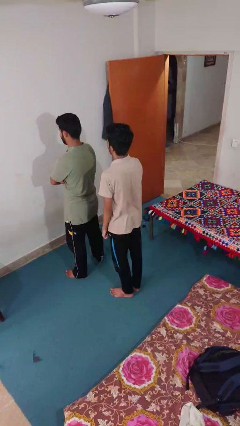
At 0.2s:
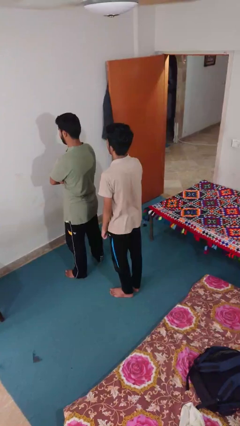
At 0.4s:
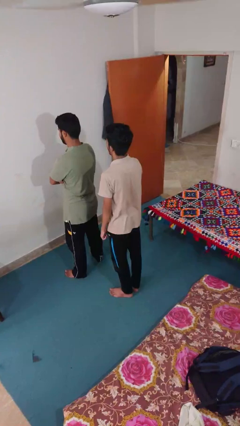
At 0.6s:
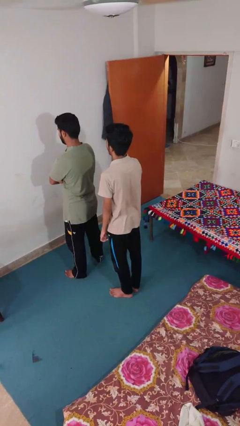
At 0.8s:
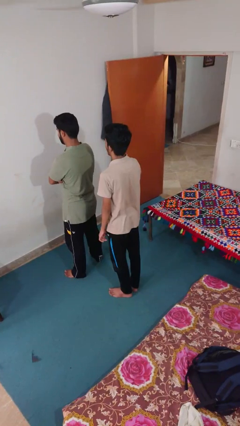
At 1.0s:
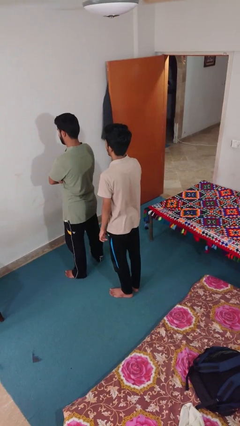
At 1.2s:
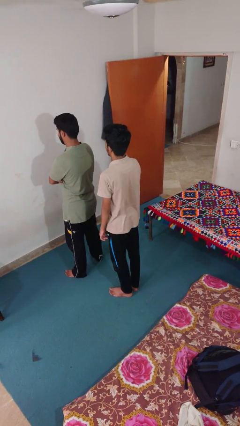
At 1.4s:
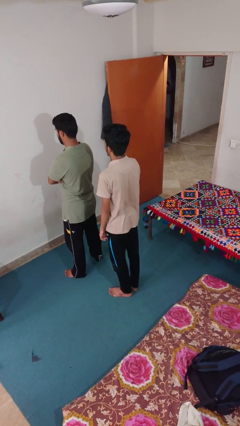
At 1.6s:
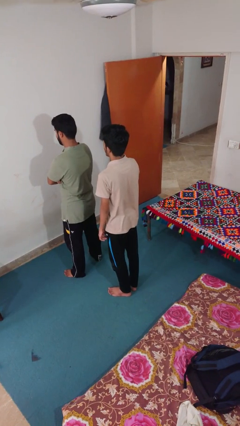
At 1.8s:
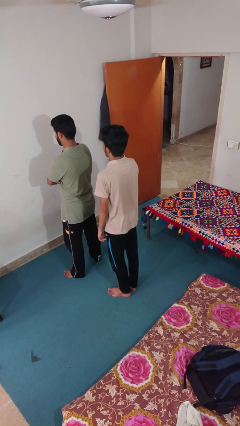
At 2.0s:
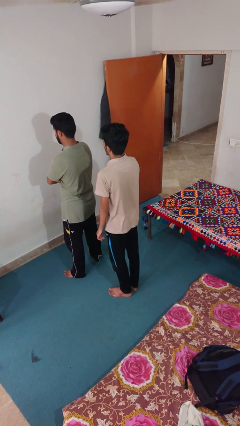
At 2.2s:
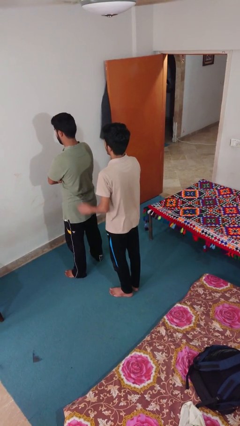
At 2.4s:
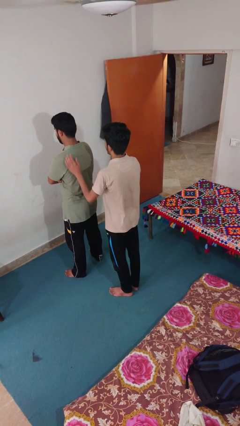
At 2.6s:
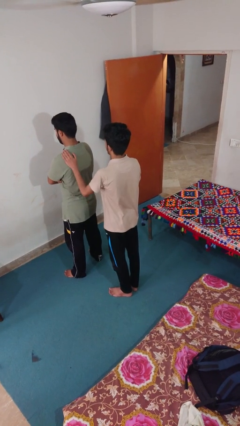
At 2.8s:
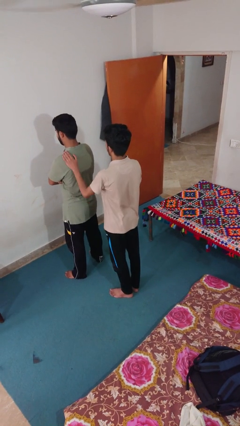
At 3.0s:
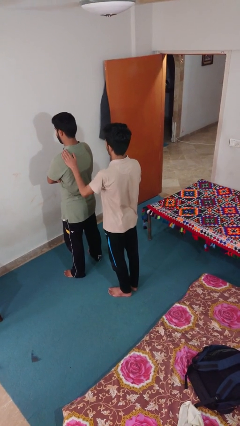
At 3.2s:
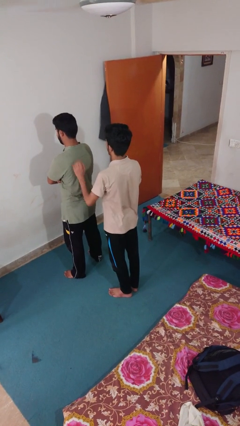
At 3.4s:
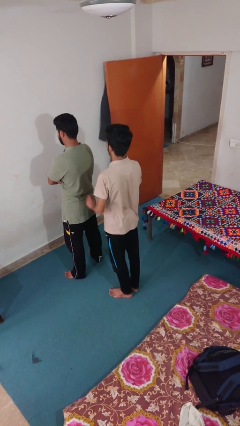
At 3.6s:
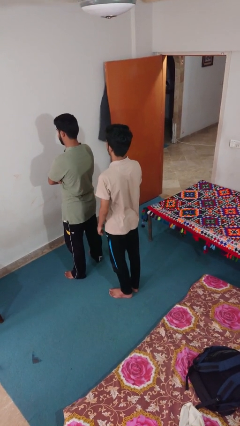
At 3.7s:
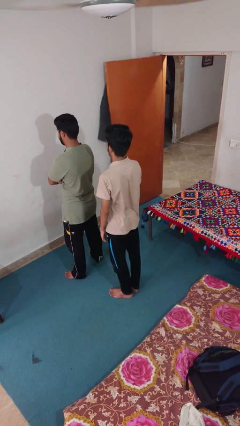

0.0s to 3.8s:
person touches back of person

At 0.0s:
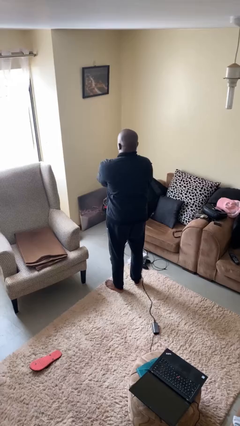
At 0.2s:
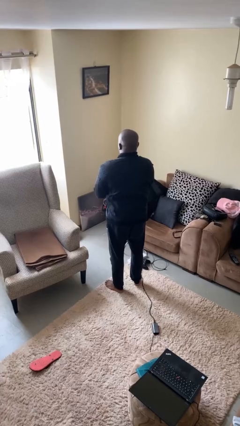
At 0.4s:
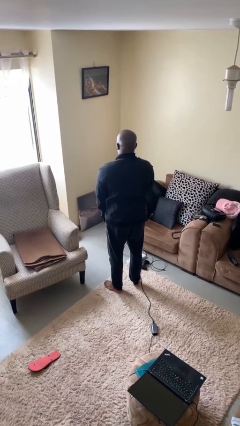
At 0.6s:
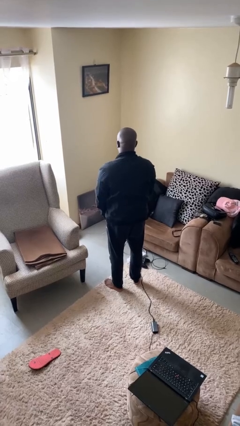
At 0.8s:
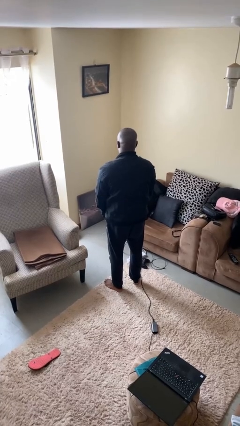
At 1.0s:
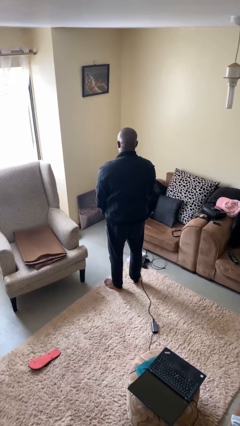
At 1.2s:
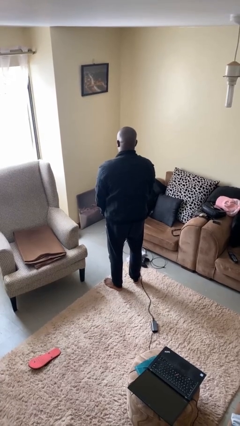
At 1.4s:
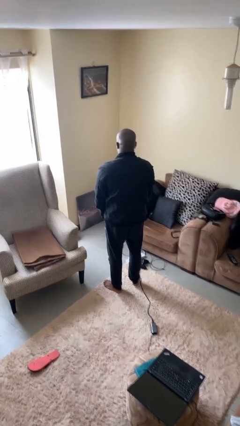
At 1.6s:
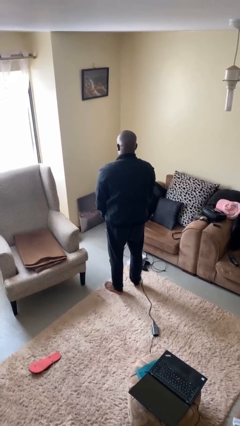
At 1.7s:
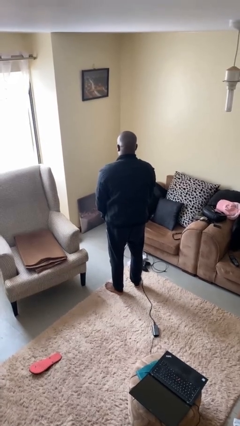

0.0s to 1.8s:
person unzips jacket

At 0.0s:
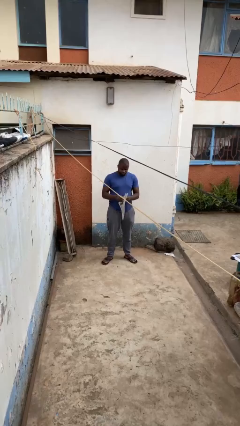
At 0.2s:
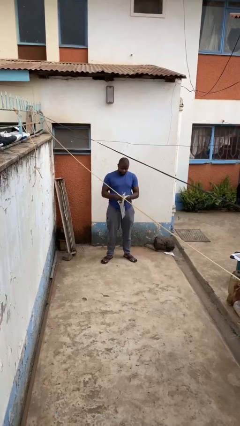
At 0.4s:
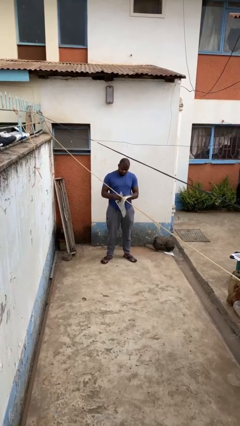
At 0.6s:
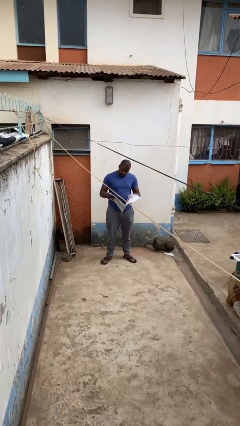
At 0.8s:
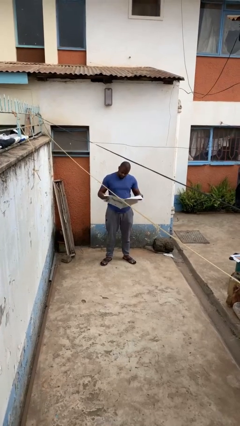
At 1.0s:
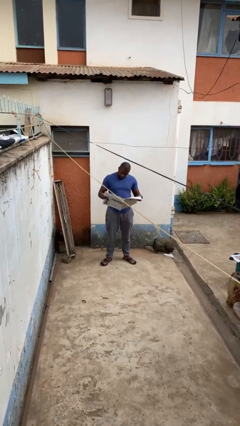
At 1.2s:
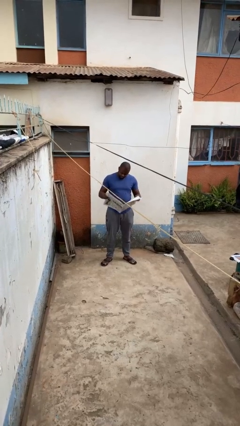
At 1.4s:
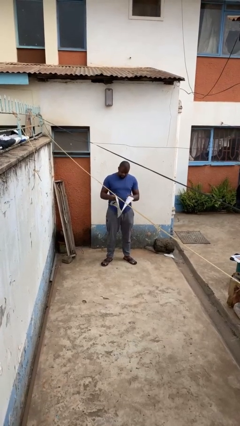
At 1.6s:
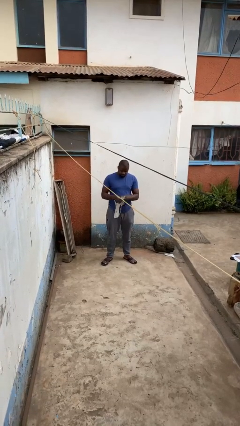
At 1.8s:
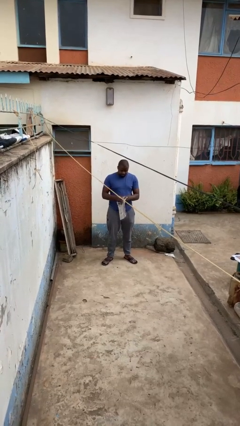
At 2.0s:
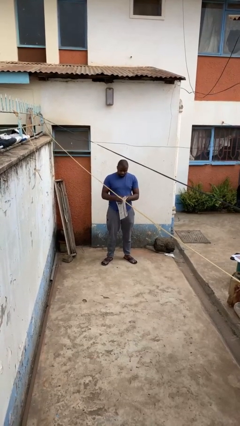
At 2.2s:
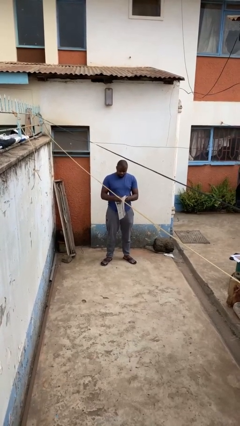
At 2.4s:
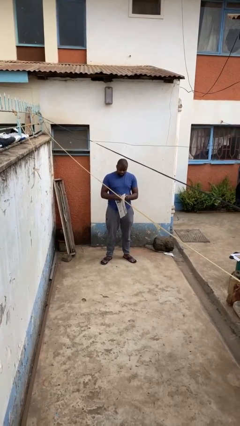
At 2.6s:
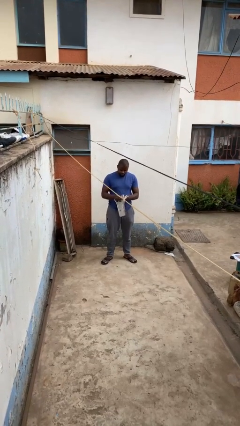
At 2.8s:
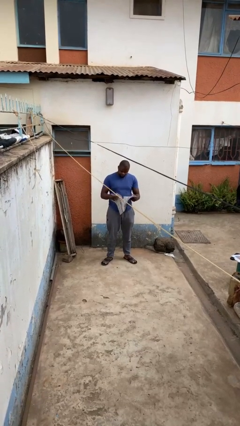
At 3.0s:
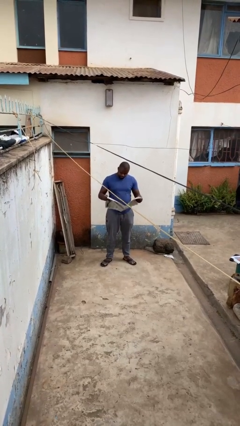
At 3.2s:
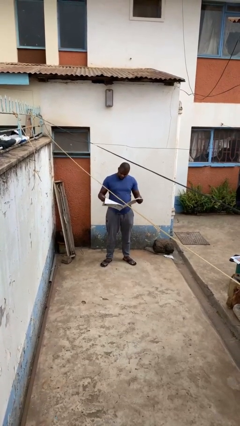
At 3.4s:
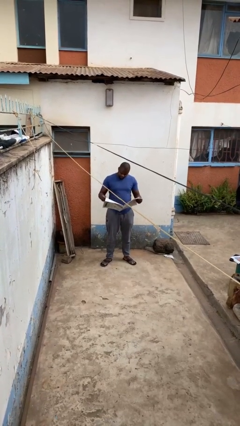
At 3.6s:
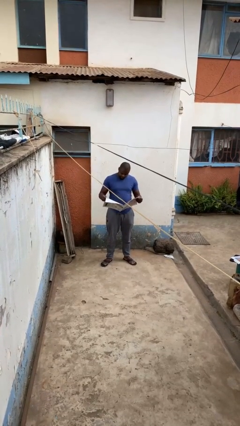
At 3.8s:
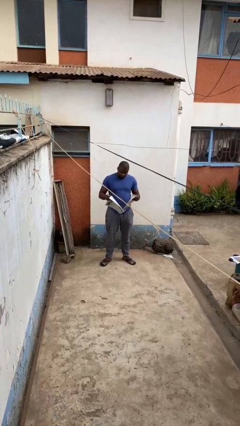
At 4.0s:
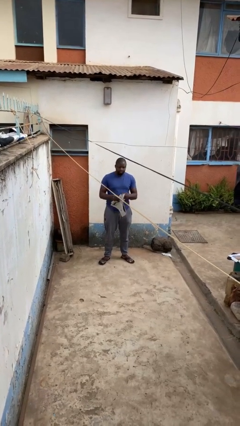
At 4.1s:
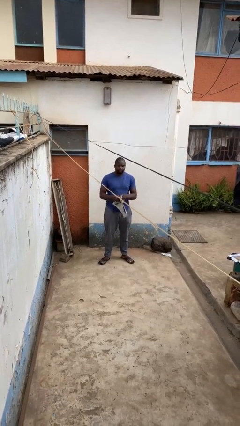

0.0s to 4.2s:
person reads newspaper

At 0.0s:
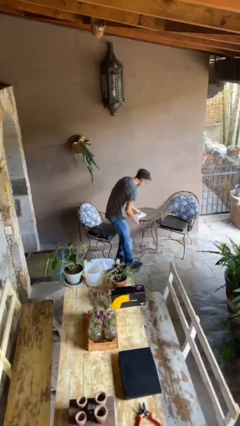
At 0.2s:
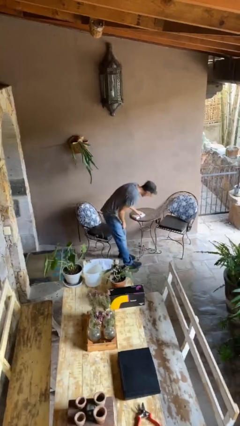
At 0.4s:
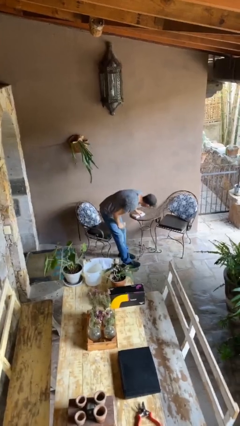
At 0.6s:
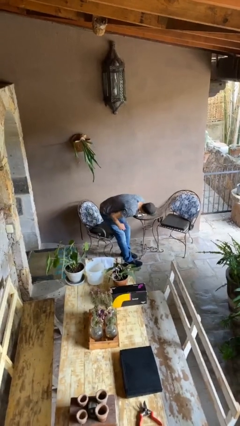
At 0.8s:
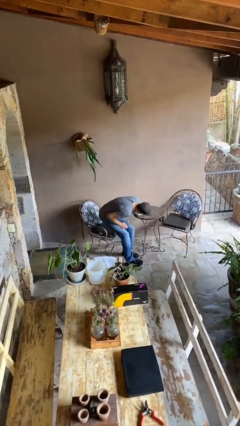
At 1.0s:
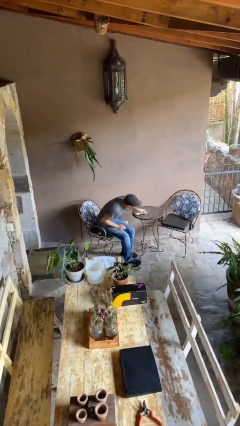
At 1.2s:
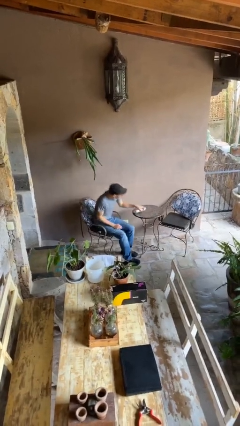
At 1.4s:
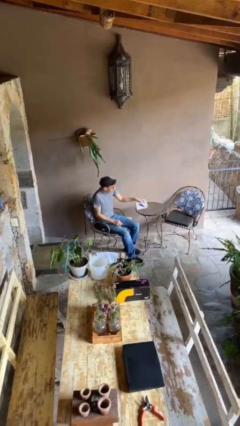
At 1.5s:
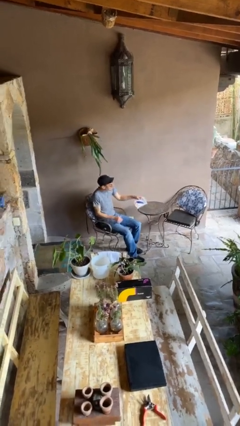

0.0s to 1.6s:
person sits down

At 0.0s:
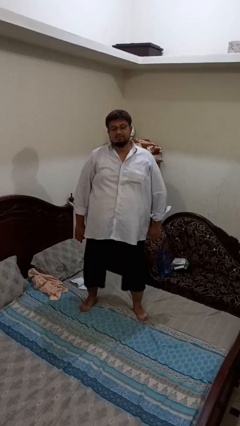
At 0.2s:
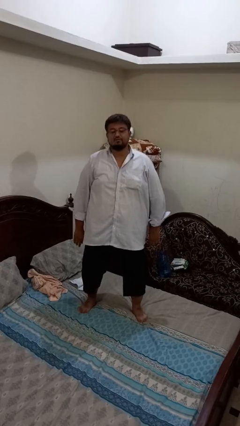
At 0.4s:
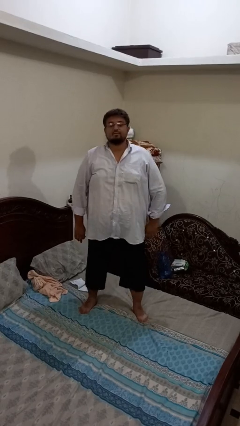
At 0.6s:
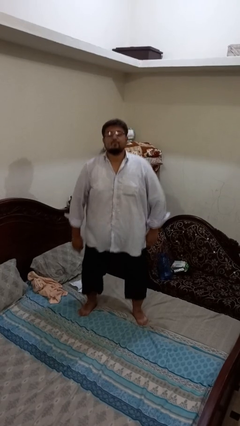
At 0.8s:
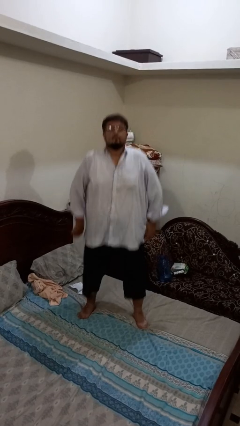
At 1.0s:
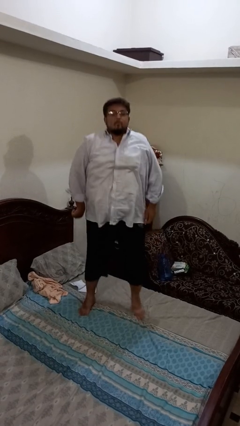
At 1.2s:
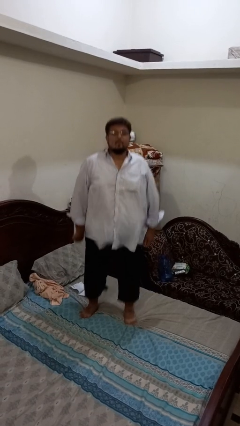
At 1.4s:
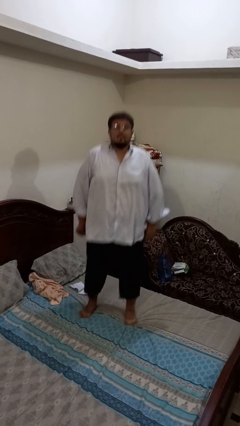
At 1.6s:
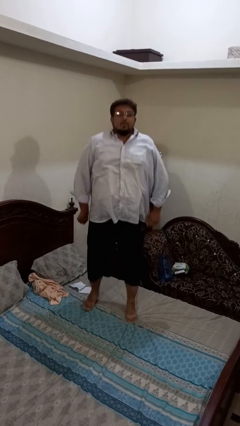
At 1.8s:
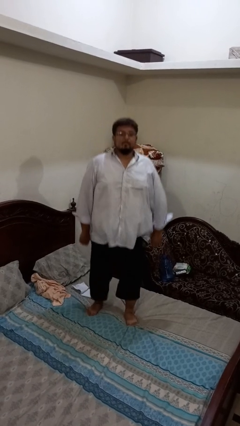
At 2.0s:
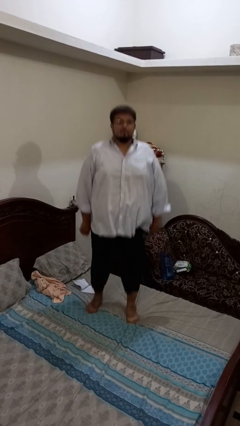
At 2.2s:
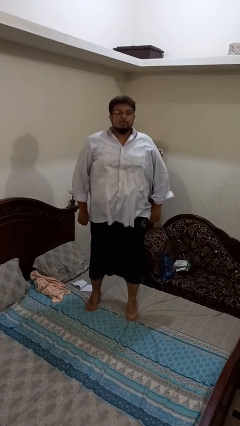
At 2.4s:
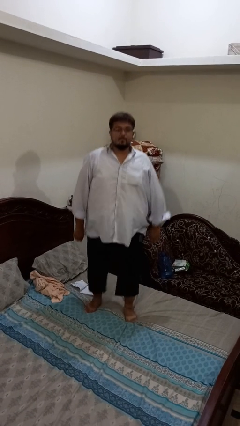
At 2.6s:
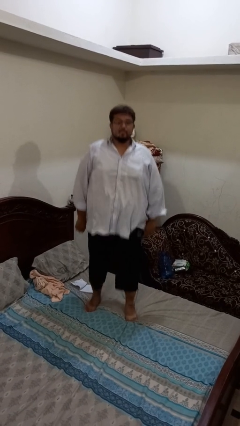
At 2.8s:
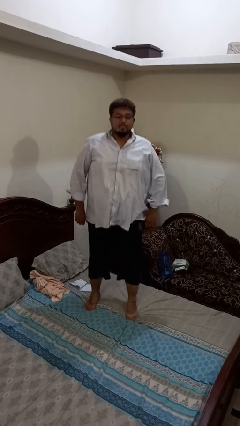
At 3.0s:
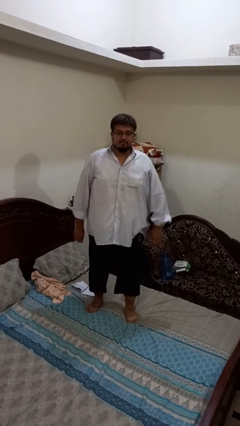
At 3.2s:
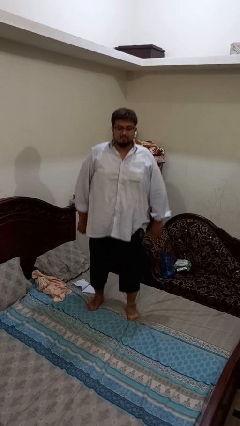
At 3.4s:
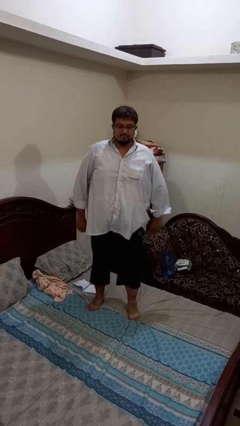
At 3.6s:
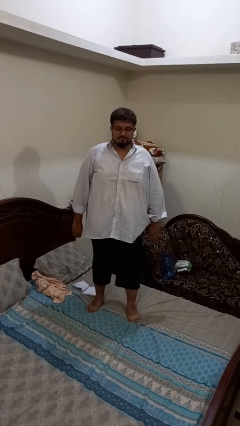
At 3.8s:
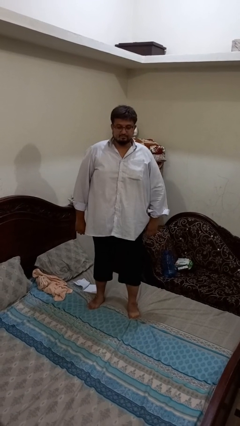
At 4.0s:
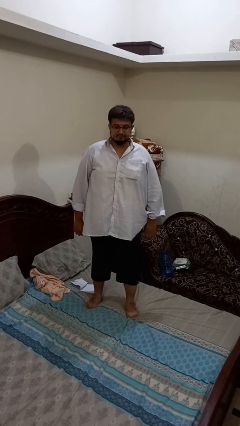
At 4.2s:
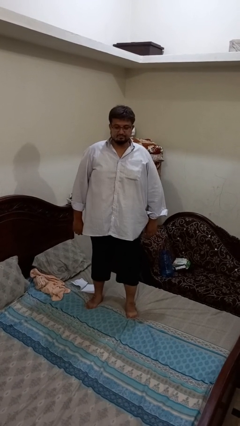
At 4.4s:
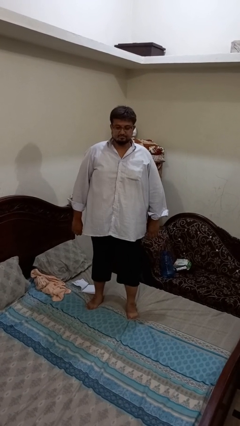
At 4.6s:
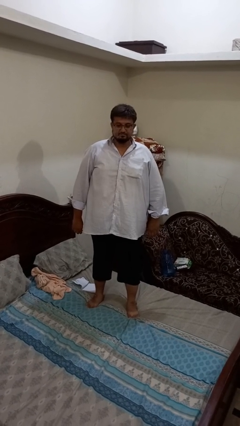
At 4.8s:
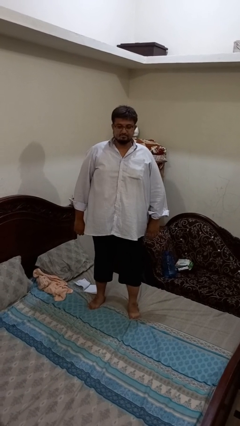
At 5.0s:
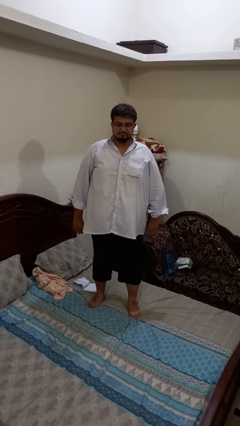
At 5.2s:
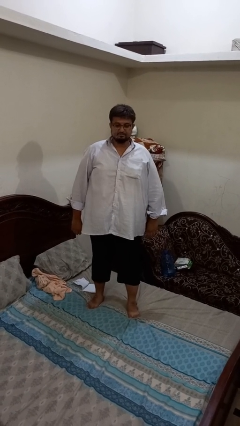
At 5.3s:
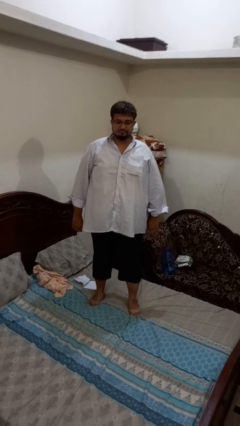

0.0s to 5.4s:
person jumps on bed

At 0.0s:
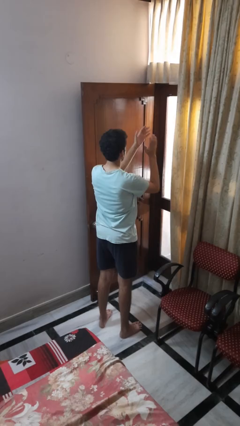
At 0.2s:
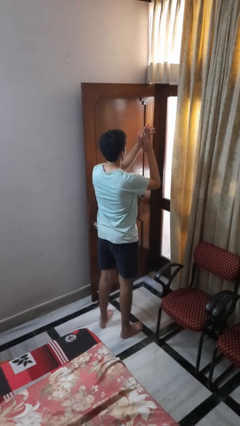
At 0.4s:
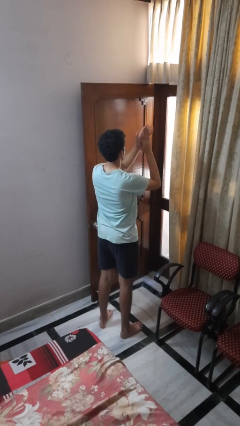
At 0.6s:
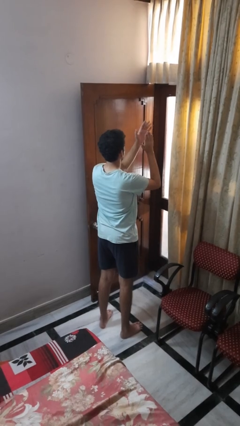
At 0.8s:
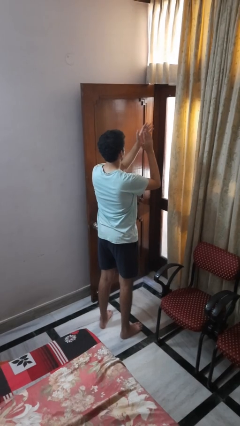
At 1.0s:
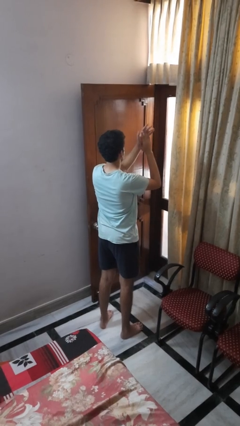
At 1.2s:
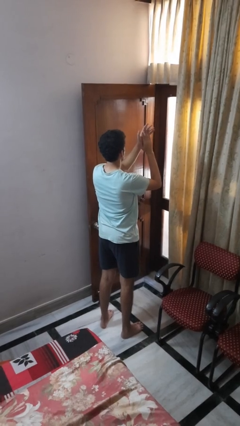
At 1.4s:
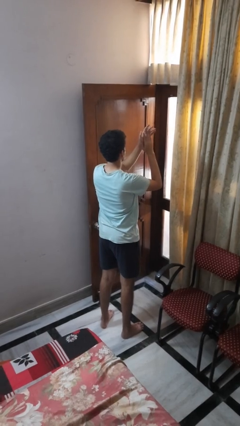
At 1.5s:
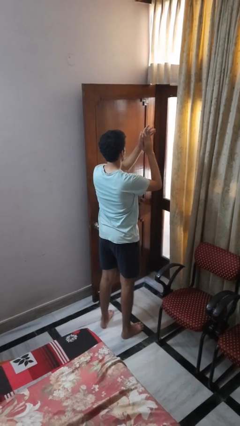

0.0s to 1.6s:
person claps hands
